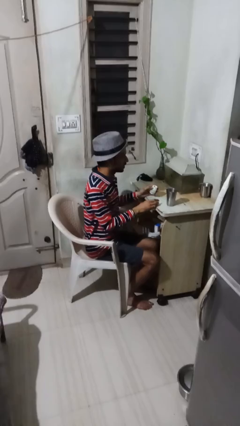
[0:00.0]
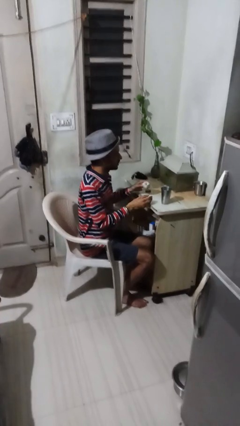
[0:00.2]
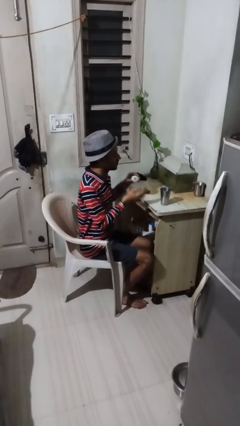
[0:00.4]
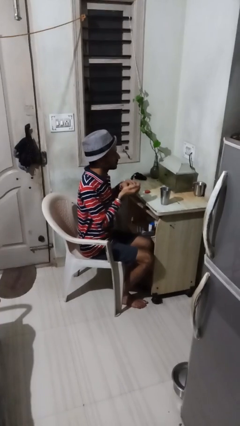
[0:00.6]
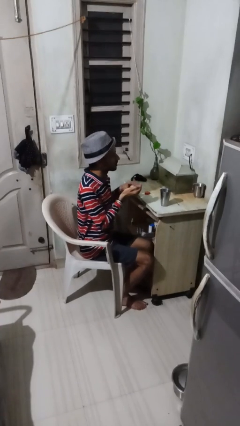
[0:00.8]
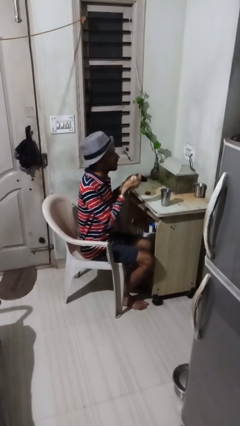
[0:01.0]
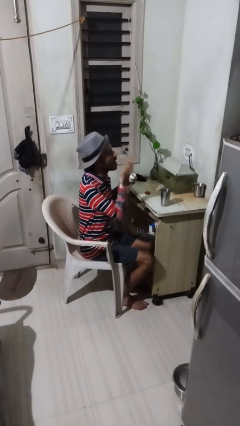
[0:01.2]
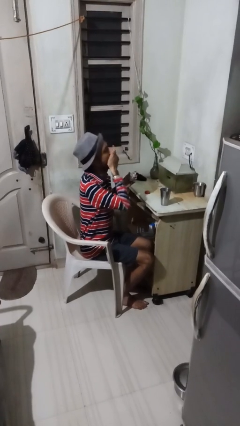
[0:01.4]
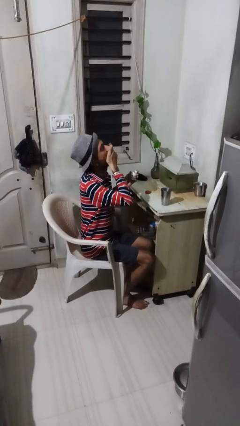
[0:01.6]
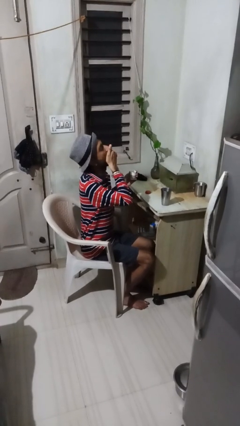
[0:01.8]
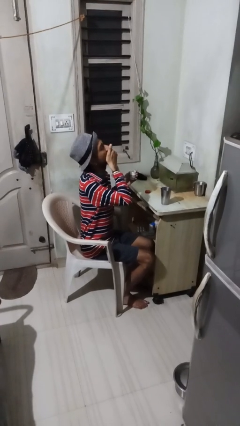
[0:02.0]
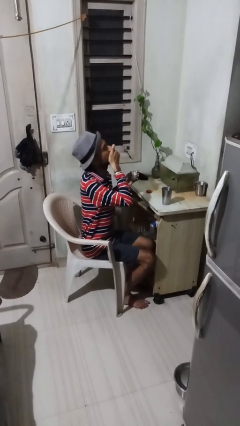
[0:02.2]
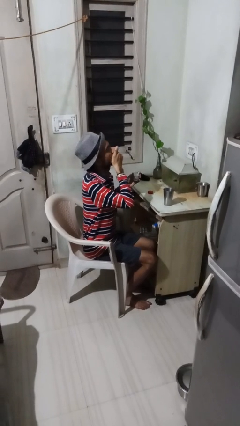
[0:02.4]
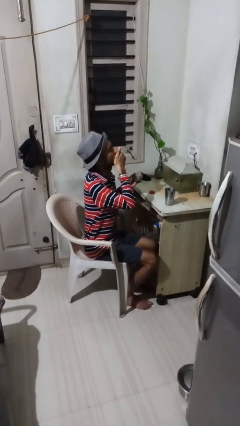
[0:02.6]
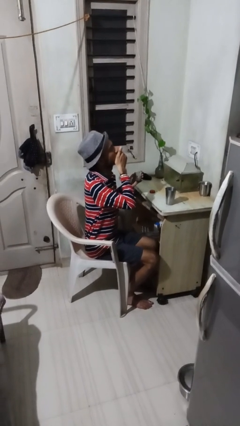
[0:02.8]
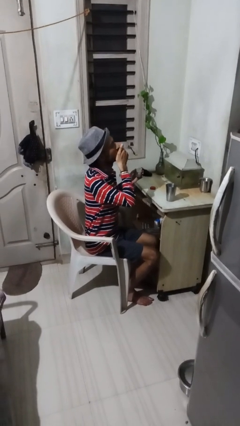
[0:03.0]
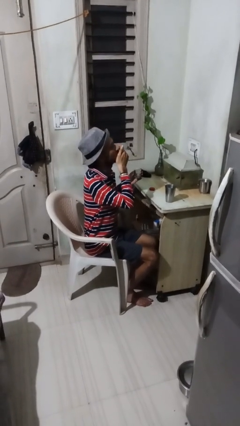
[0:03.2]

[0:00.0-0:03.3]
person takes medicine pills

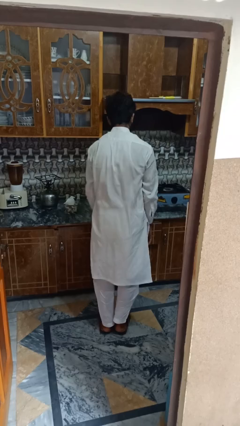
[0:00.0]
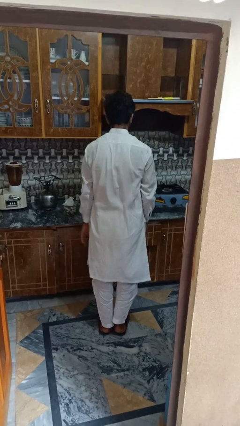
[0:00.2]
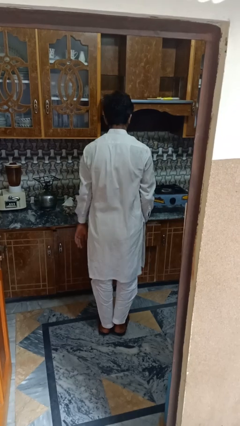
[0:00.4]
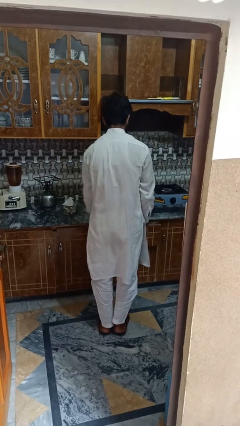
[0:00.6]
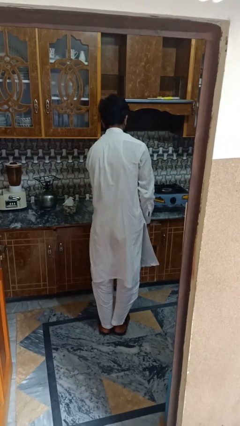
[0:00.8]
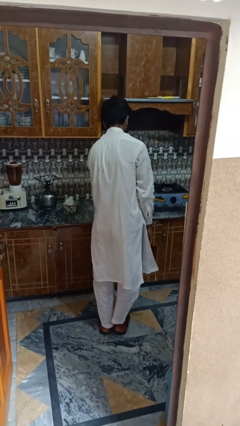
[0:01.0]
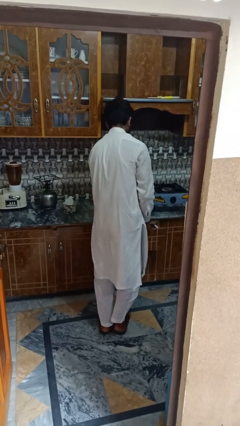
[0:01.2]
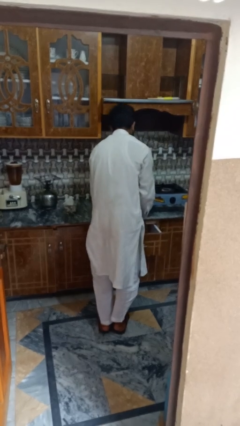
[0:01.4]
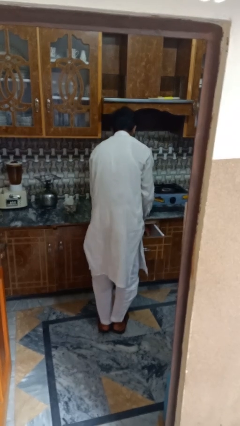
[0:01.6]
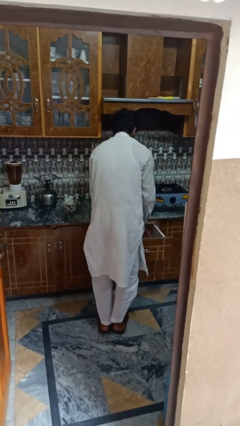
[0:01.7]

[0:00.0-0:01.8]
person searches in kitchen drawer

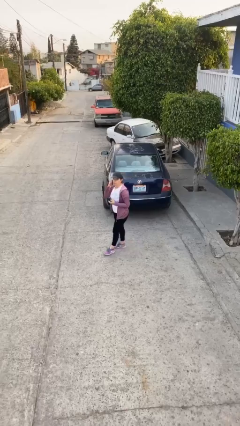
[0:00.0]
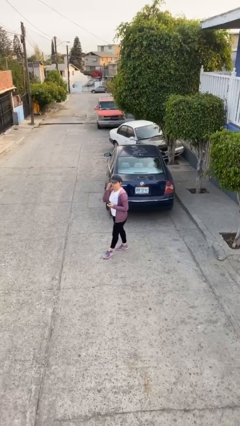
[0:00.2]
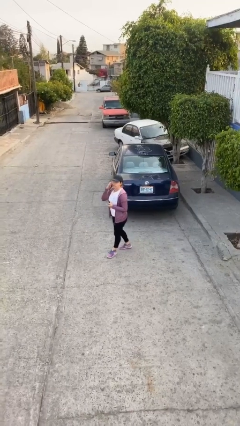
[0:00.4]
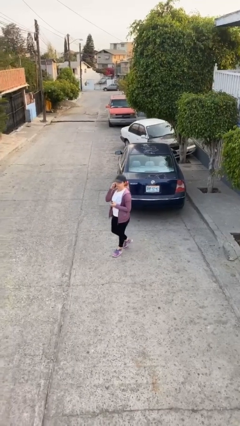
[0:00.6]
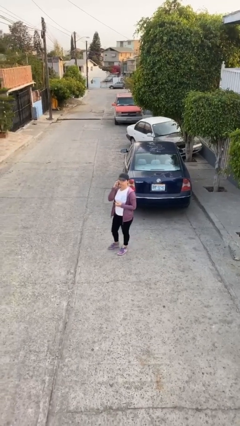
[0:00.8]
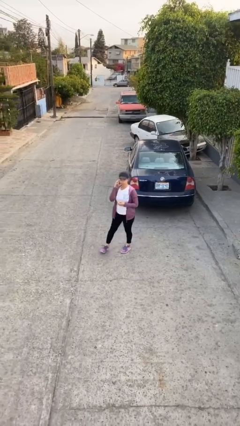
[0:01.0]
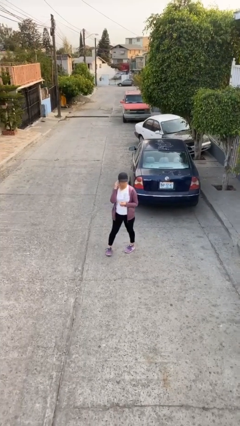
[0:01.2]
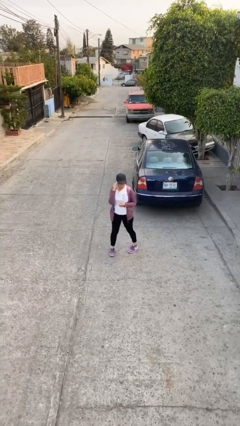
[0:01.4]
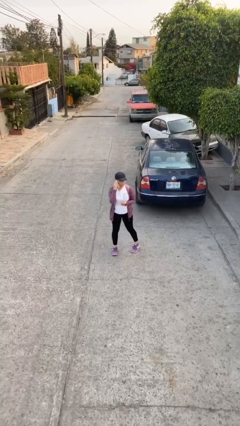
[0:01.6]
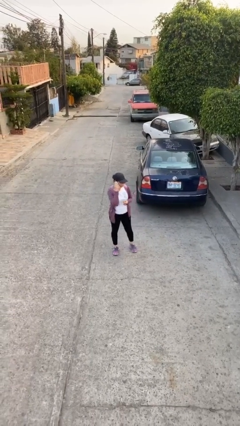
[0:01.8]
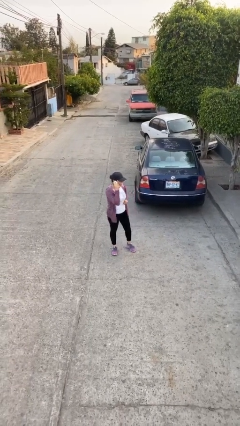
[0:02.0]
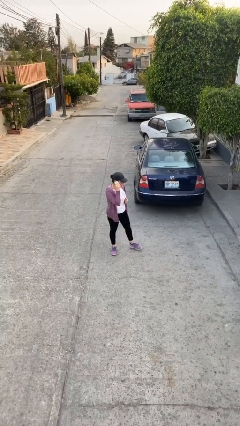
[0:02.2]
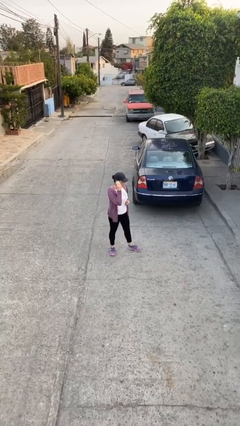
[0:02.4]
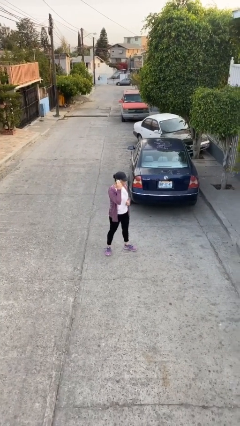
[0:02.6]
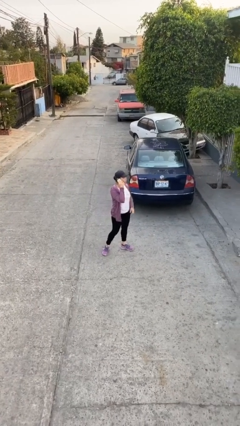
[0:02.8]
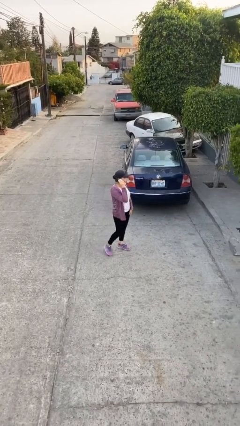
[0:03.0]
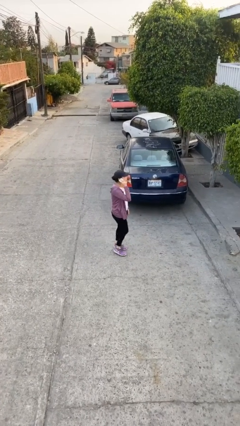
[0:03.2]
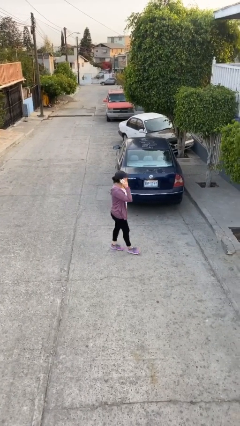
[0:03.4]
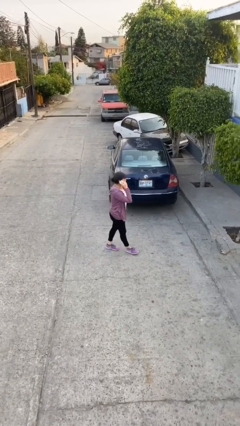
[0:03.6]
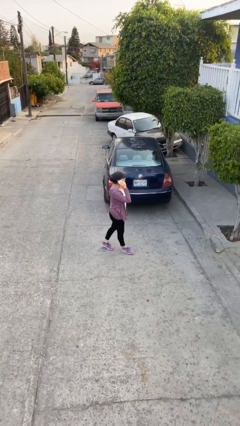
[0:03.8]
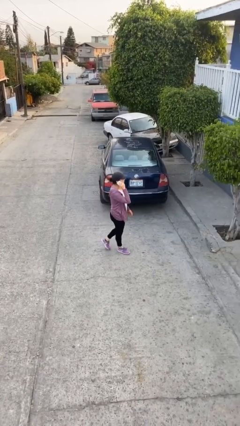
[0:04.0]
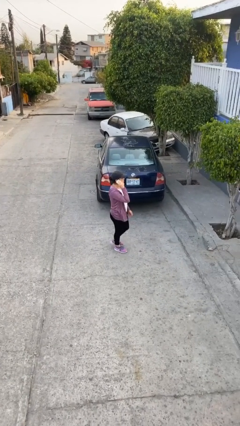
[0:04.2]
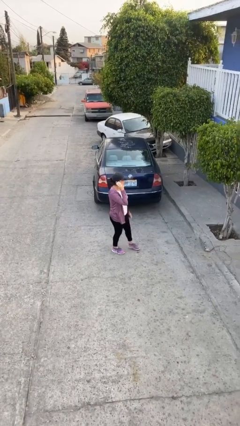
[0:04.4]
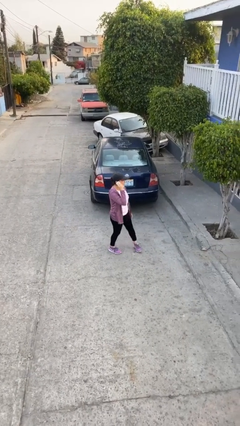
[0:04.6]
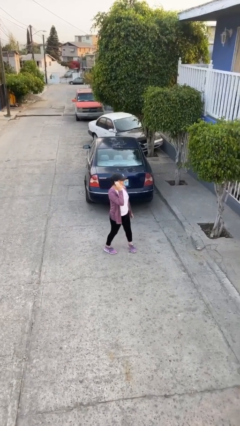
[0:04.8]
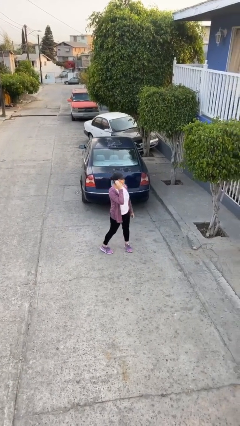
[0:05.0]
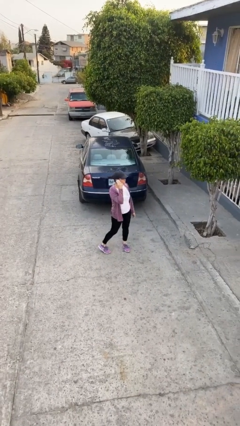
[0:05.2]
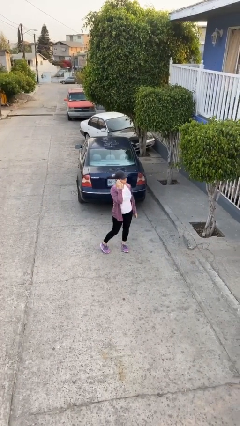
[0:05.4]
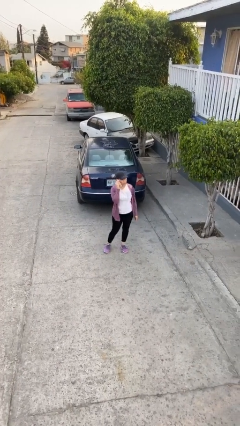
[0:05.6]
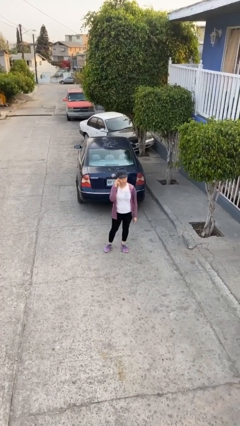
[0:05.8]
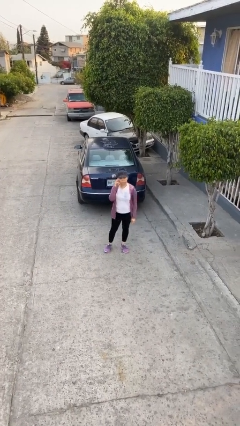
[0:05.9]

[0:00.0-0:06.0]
person talks on phone

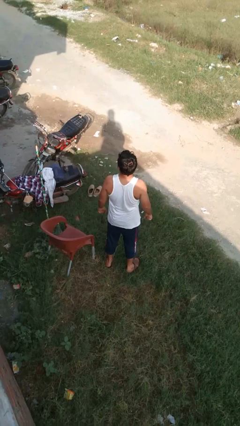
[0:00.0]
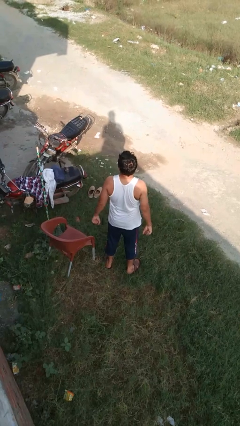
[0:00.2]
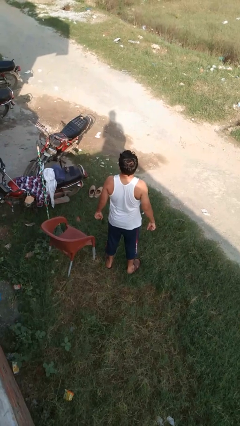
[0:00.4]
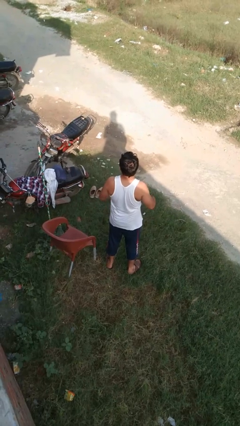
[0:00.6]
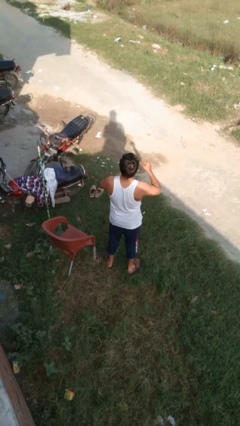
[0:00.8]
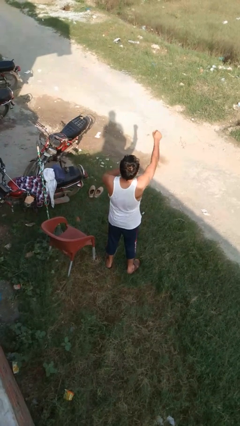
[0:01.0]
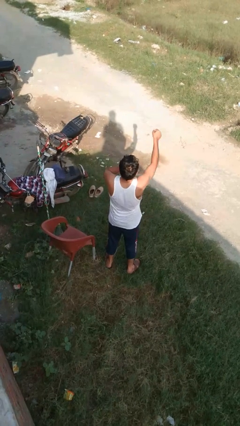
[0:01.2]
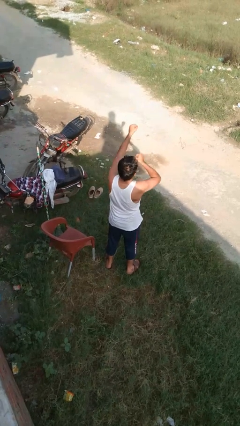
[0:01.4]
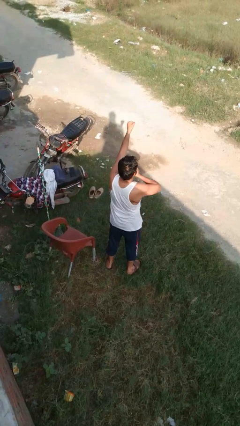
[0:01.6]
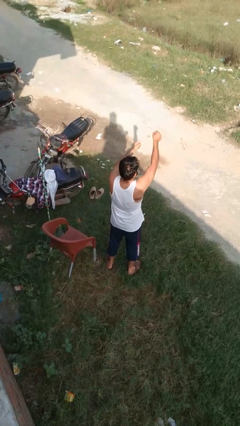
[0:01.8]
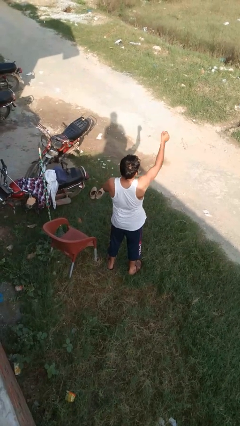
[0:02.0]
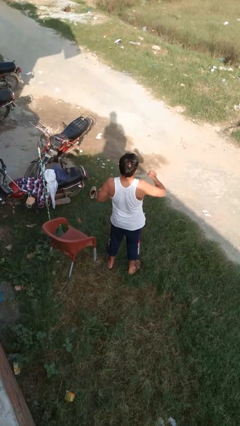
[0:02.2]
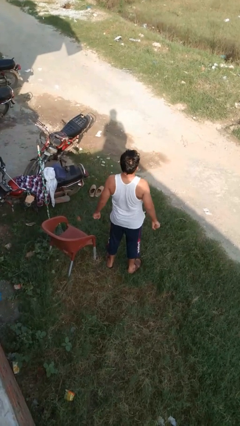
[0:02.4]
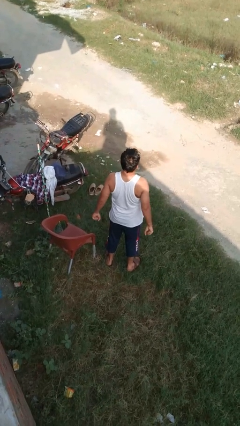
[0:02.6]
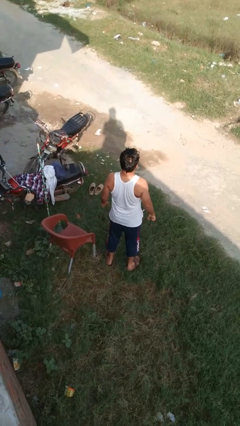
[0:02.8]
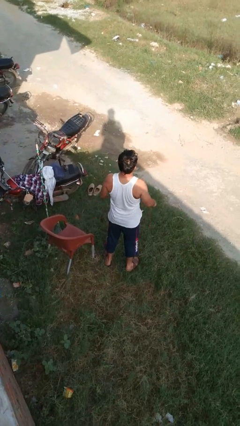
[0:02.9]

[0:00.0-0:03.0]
person punches

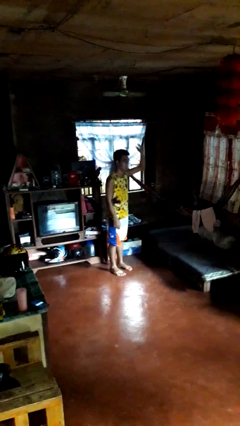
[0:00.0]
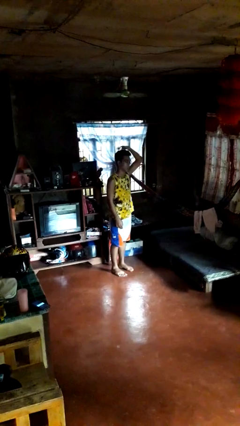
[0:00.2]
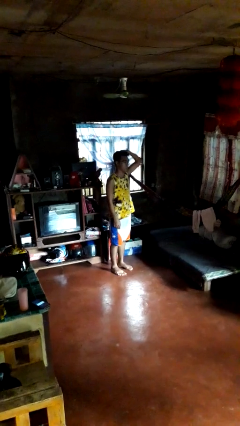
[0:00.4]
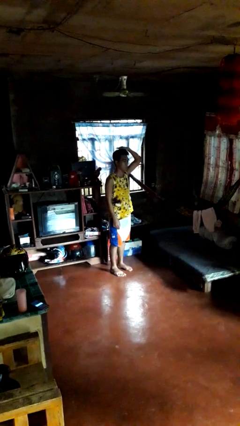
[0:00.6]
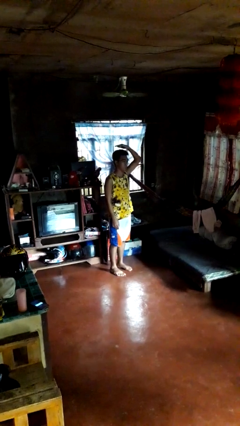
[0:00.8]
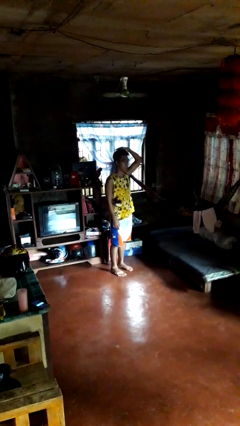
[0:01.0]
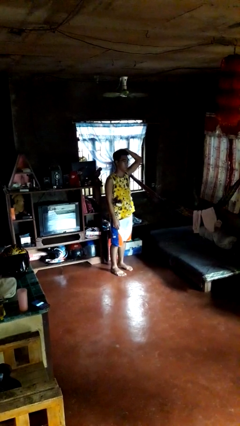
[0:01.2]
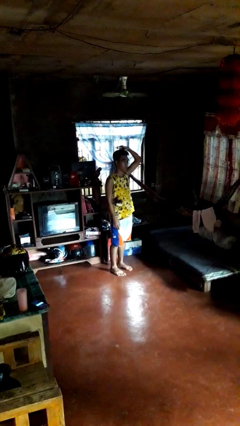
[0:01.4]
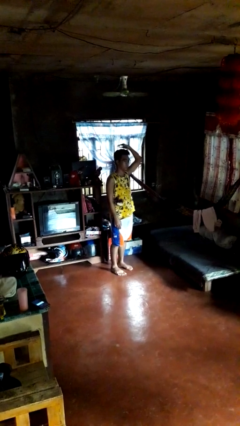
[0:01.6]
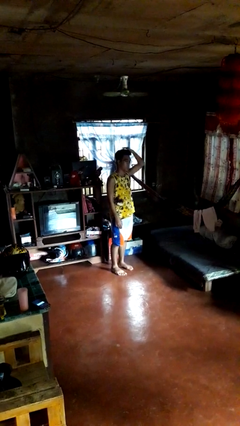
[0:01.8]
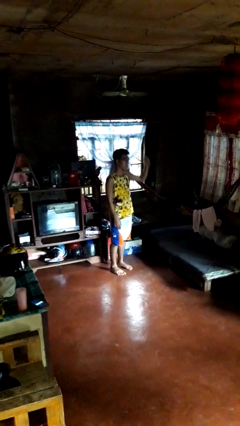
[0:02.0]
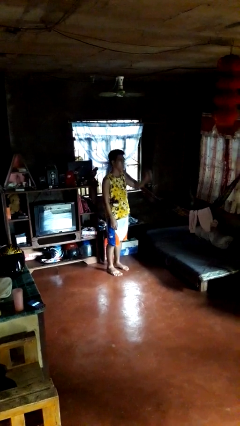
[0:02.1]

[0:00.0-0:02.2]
person pats head

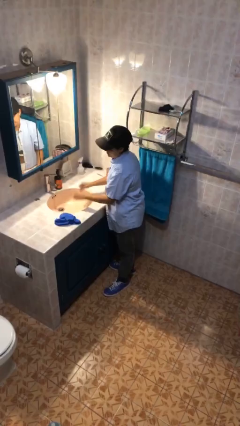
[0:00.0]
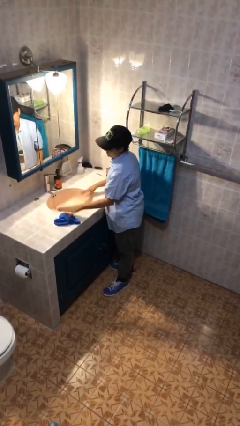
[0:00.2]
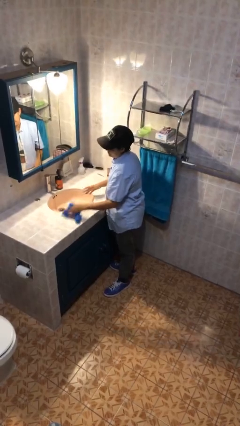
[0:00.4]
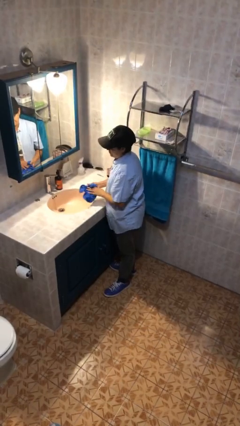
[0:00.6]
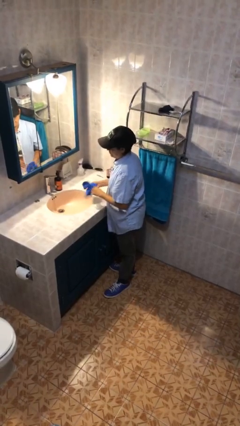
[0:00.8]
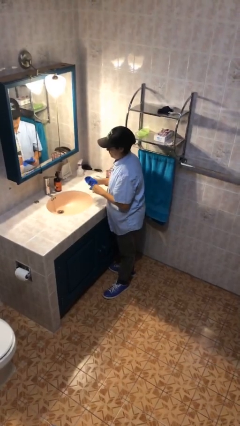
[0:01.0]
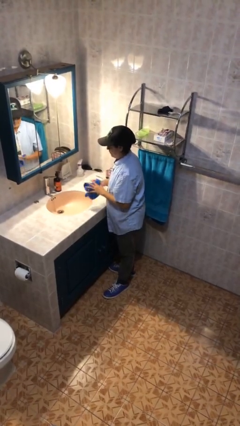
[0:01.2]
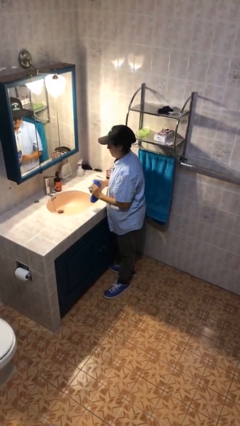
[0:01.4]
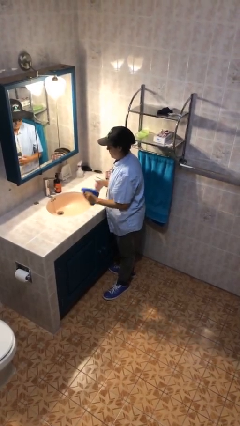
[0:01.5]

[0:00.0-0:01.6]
person dries hands with towel
